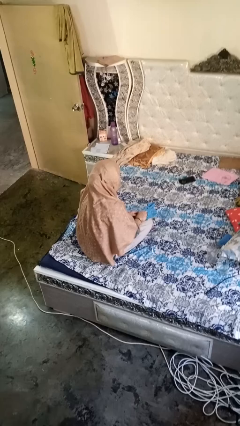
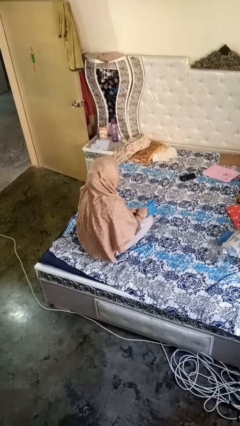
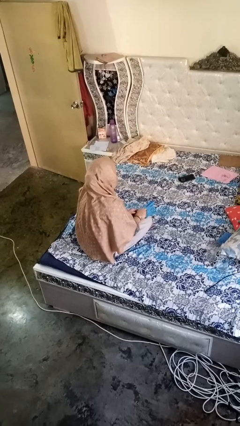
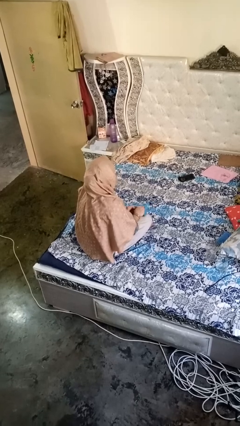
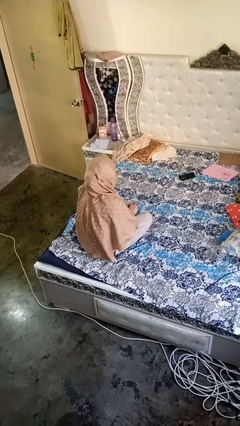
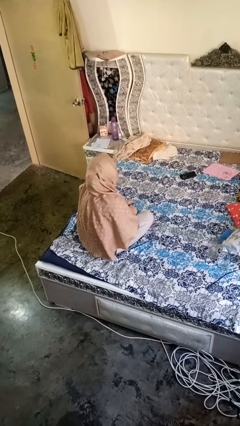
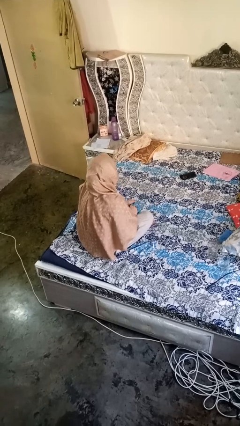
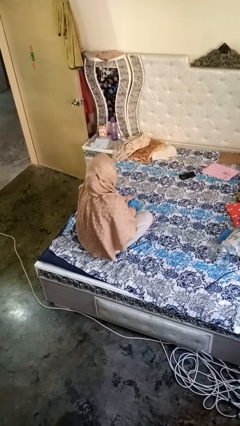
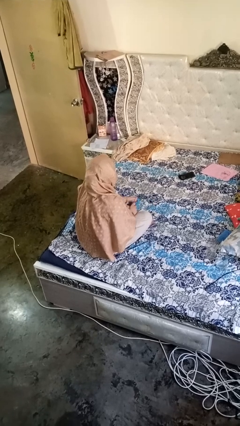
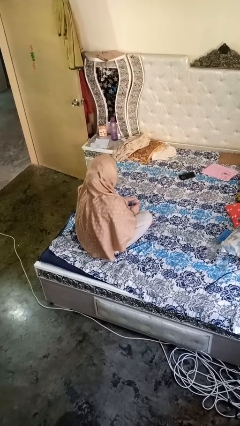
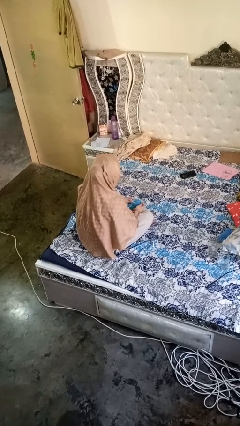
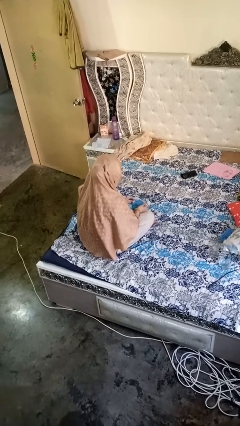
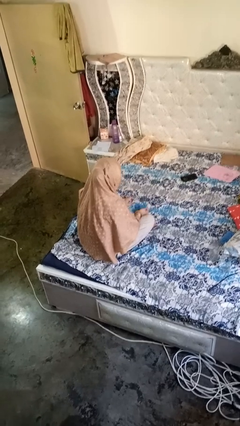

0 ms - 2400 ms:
person takes off gloves

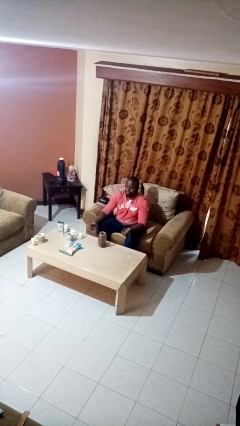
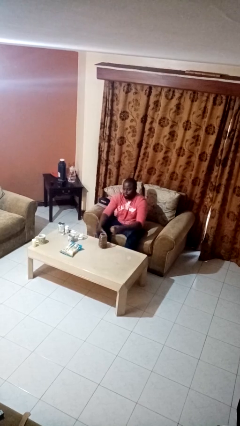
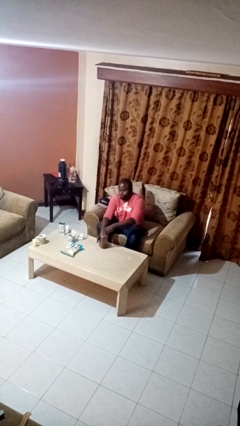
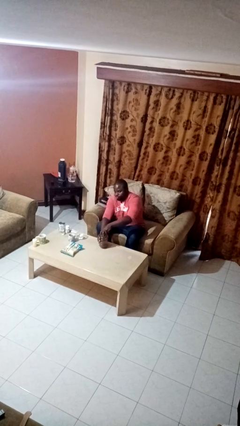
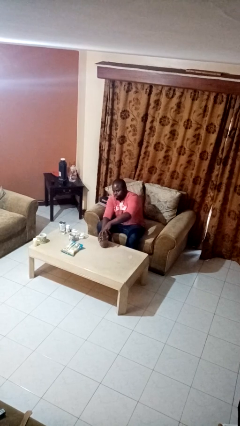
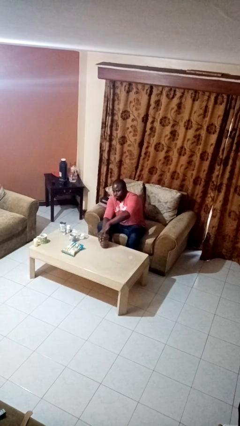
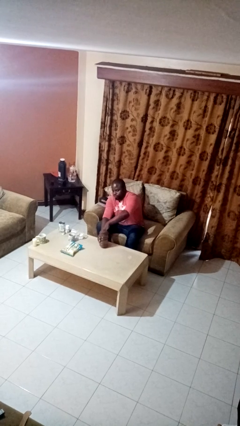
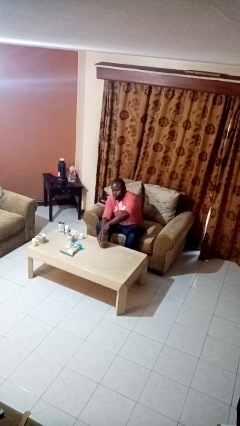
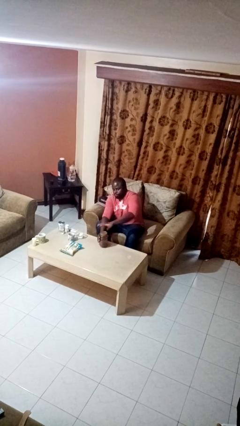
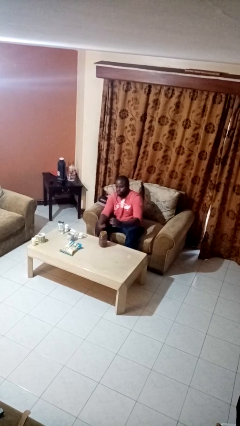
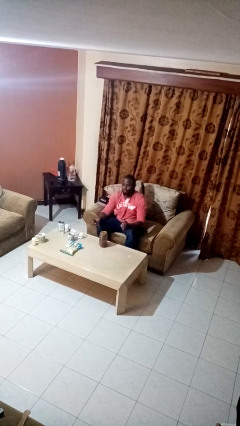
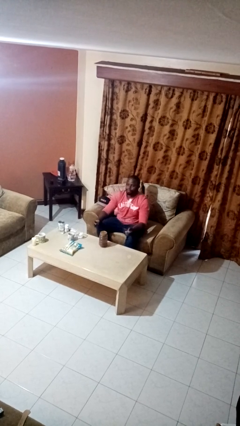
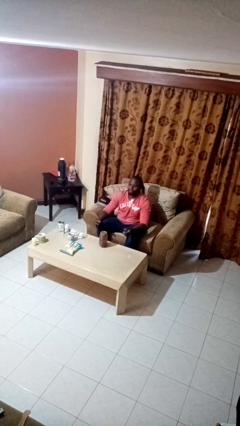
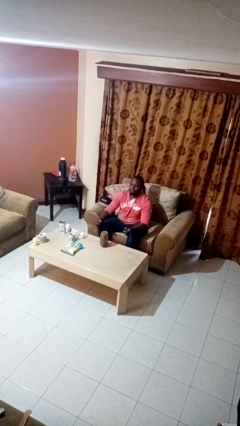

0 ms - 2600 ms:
person closes jar

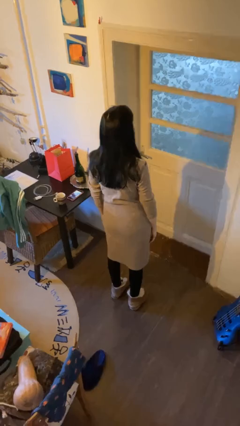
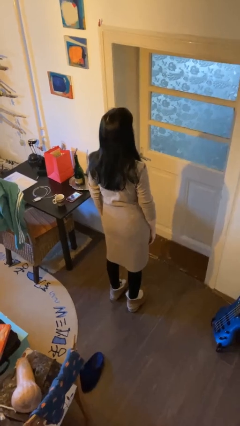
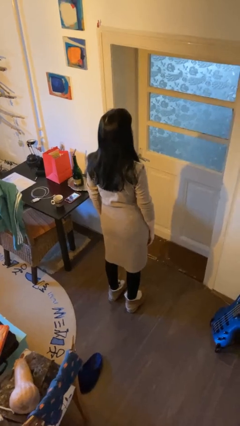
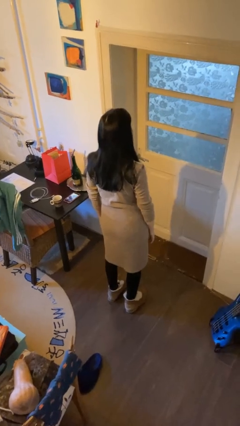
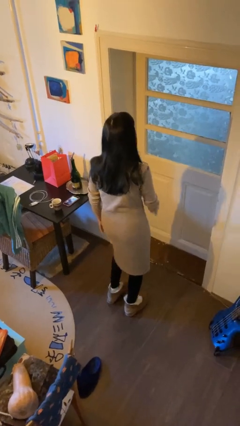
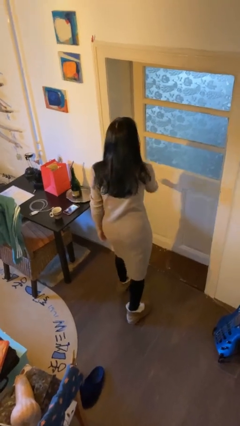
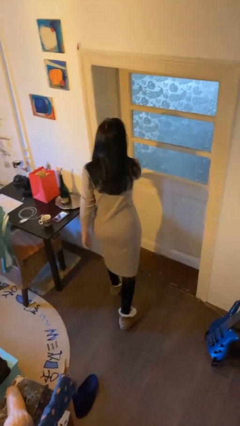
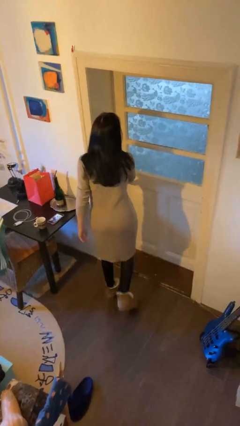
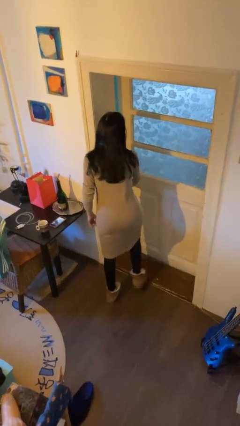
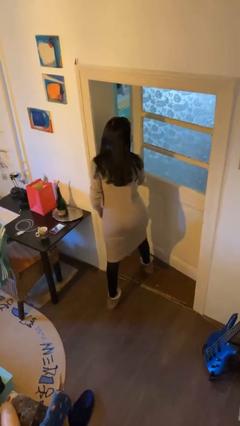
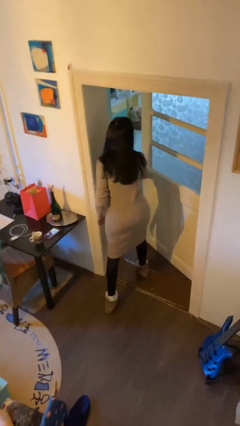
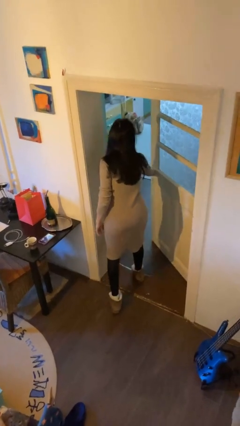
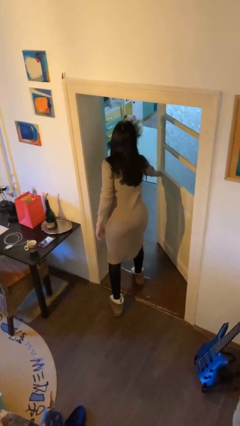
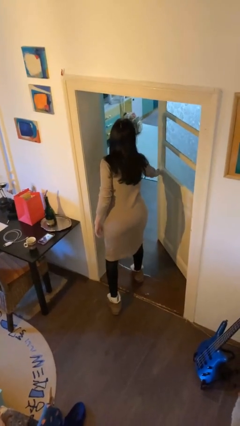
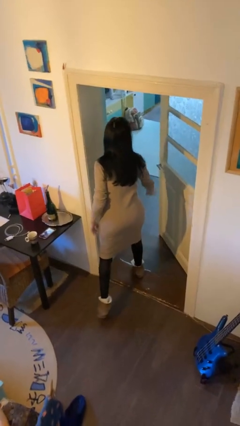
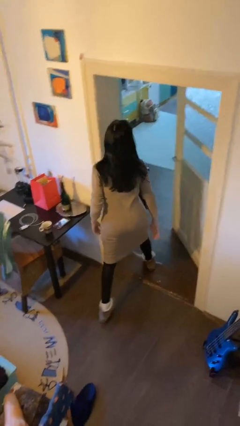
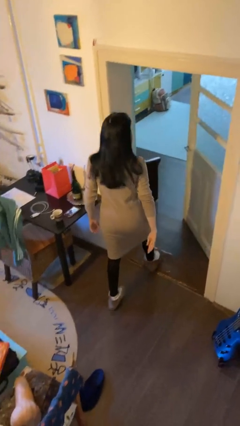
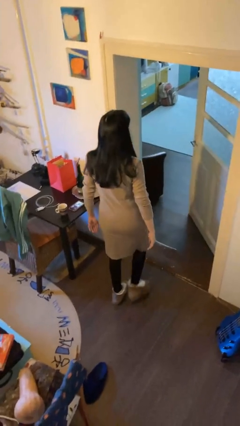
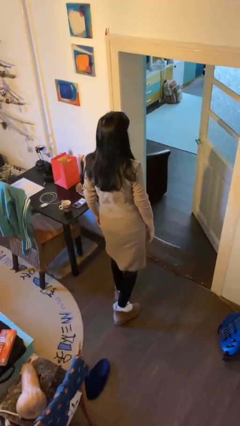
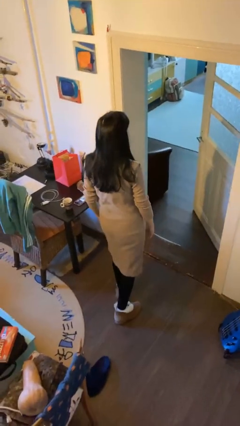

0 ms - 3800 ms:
person opens facility door

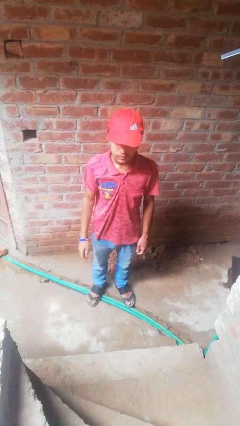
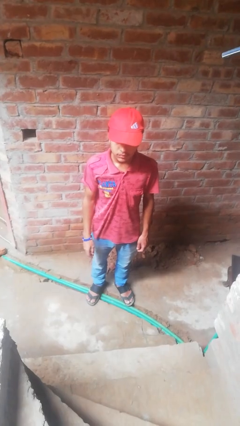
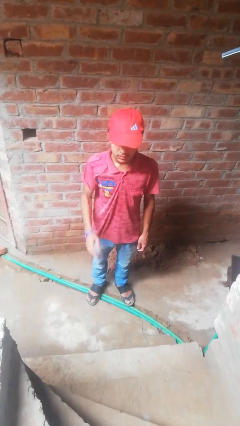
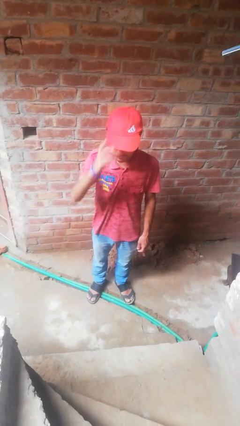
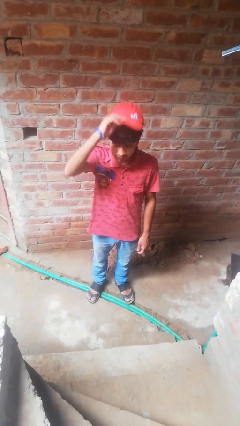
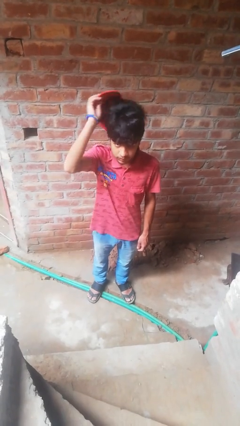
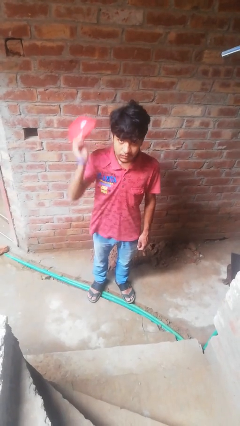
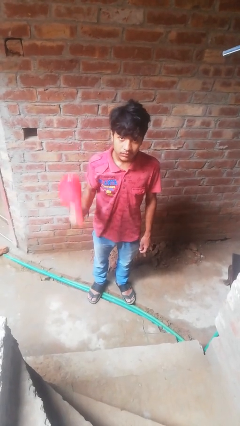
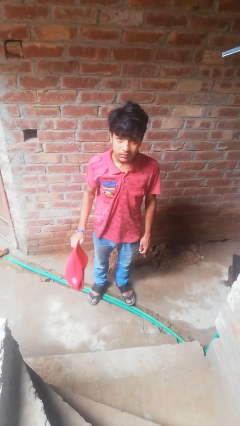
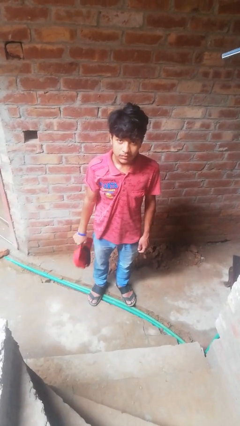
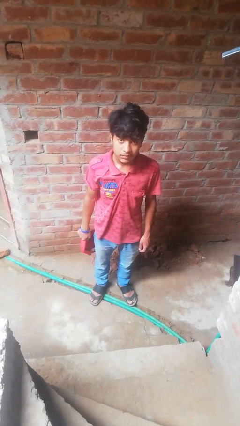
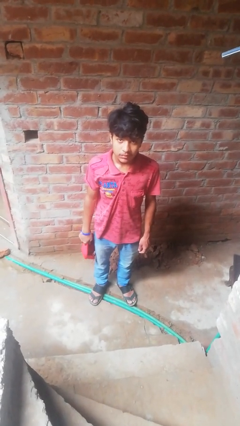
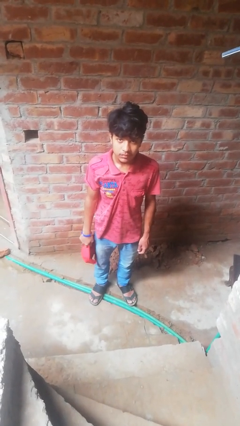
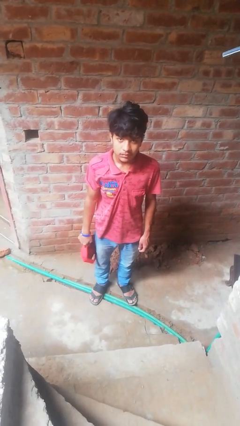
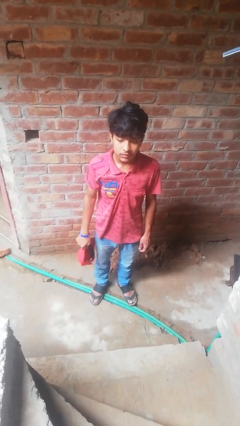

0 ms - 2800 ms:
person takes off hat

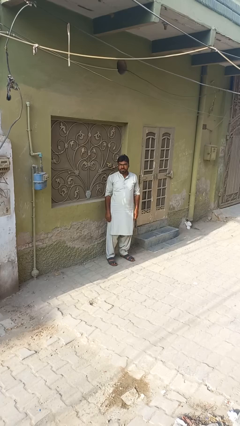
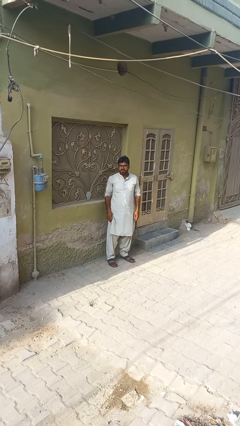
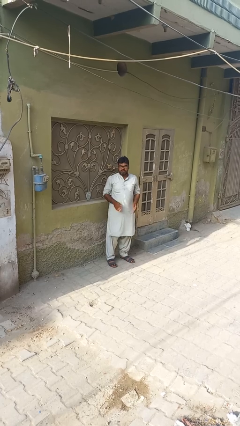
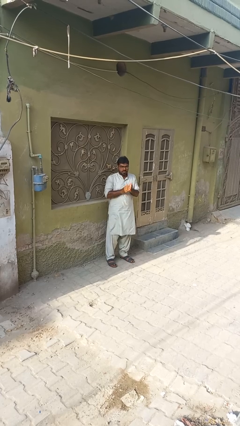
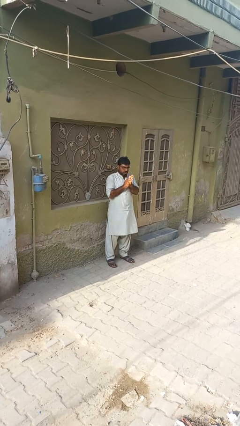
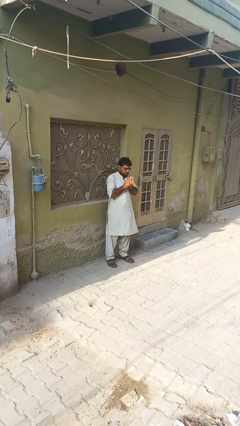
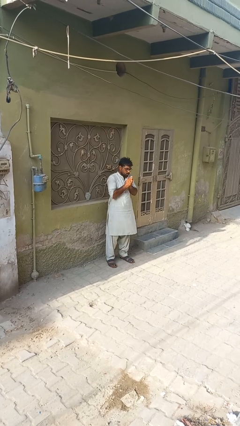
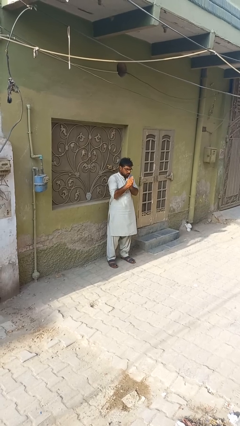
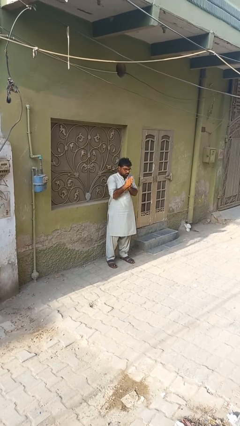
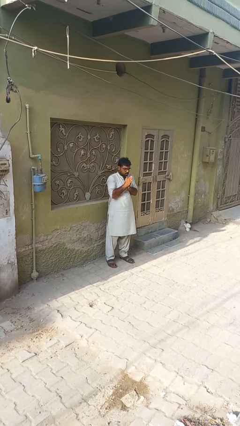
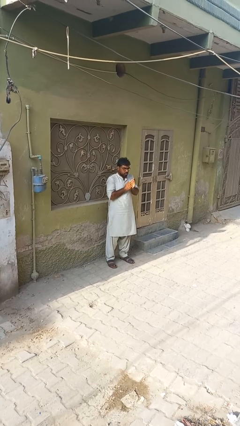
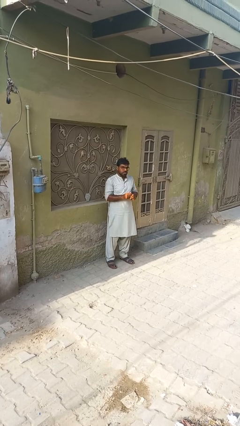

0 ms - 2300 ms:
person blows into hands

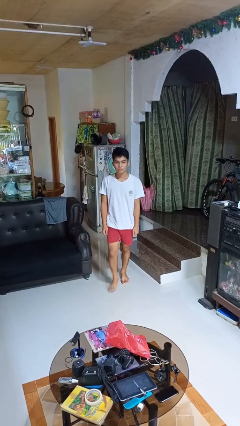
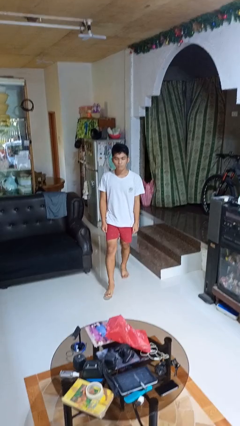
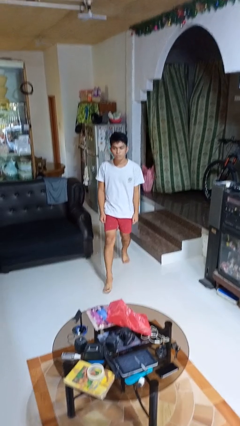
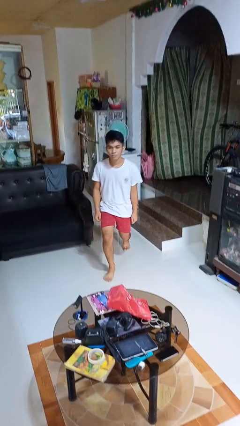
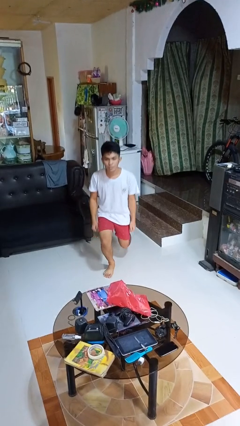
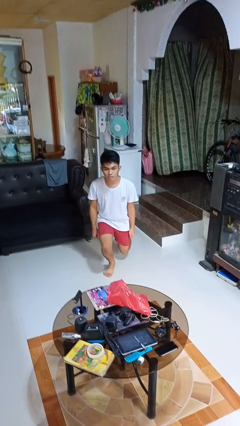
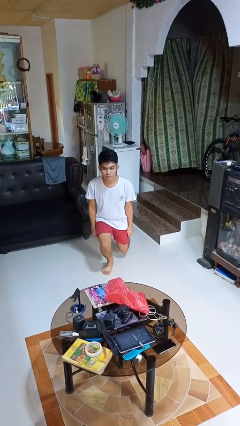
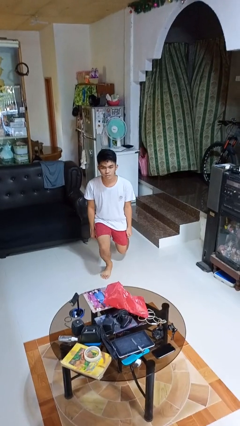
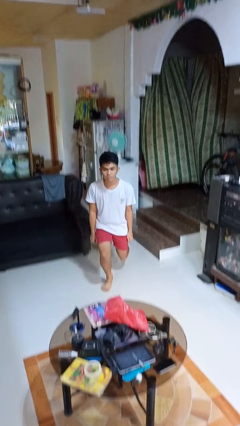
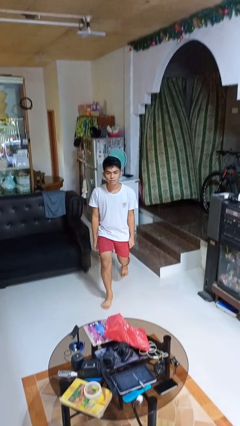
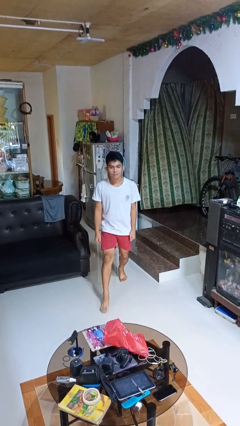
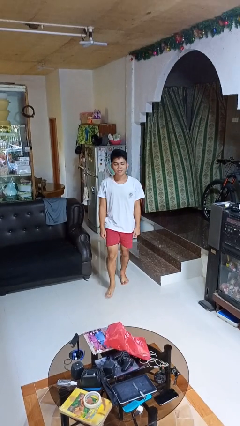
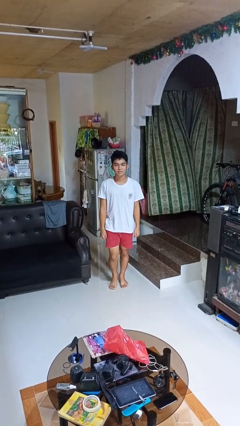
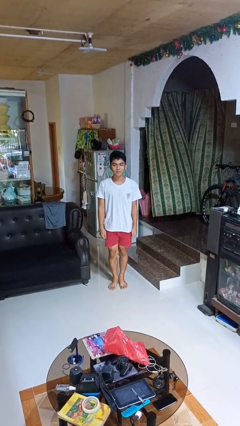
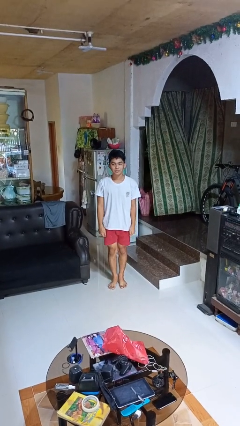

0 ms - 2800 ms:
person exercises with lunges

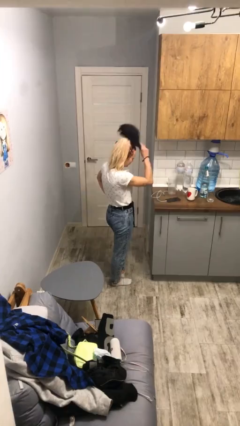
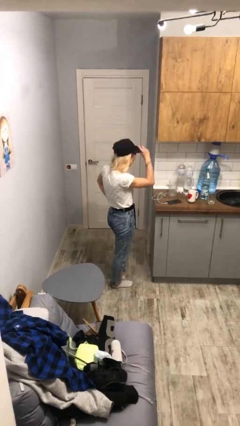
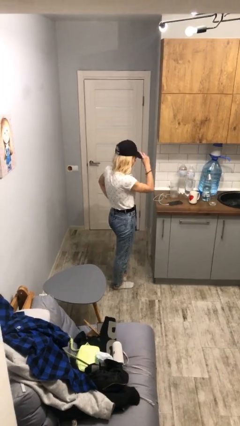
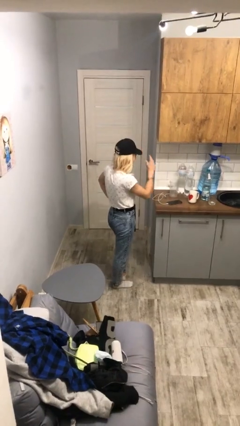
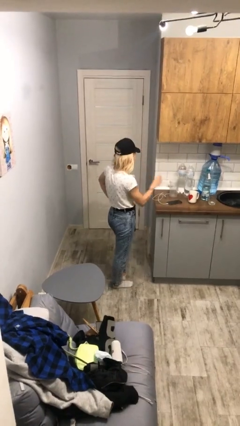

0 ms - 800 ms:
person puts on hat
